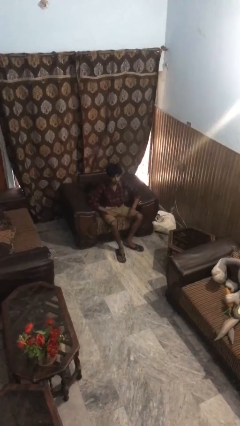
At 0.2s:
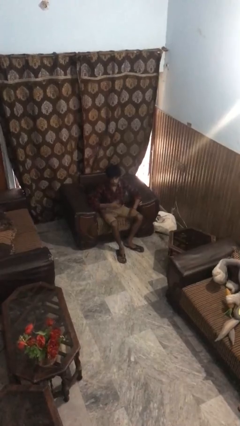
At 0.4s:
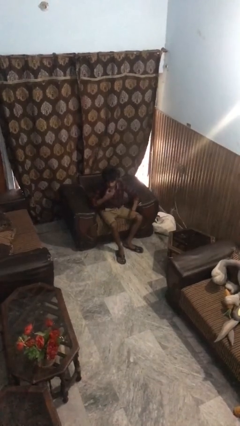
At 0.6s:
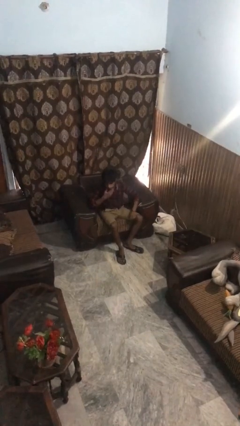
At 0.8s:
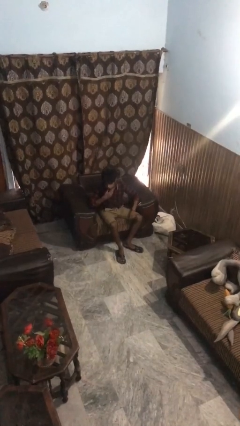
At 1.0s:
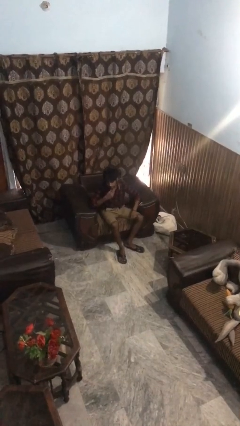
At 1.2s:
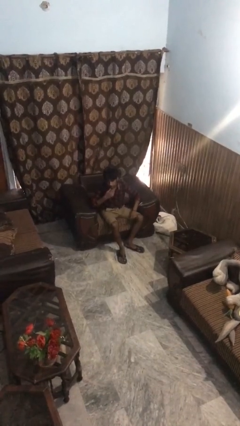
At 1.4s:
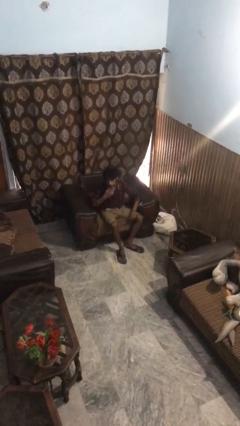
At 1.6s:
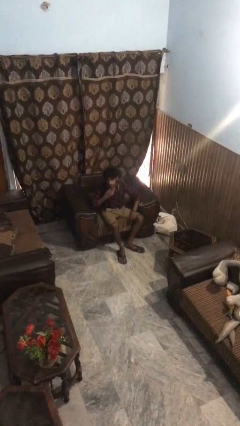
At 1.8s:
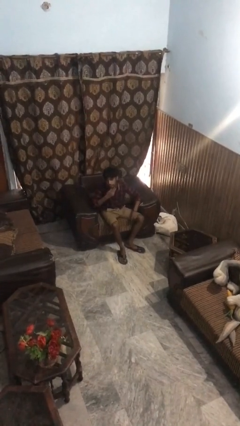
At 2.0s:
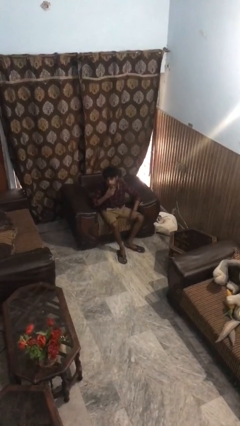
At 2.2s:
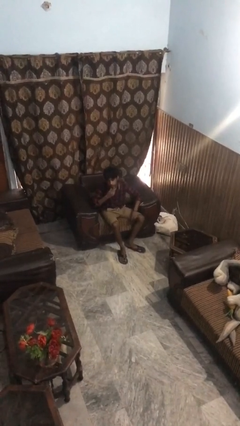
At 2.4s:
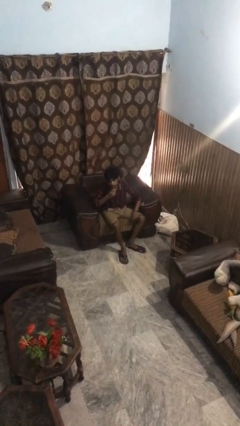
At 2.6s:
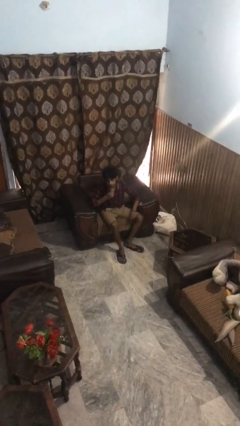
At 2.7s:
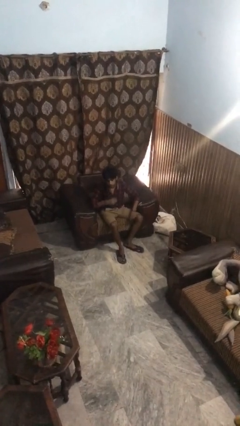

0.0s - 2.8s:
person strokes chin

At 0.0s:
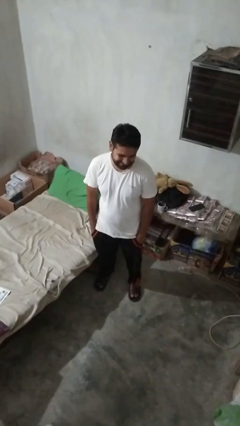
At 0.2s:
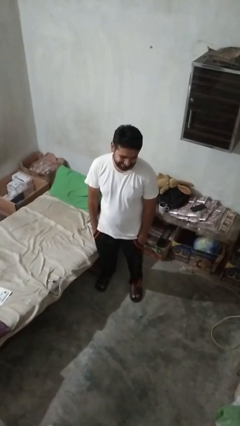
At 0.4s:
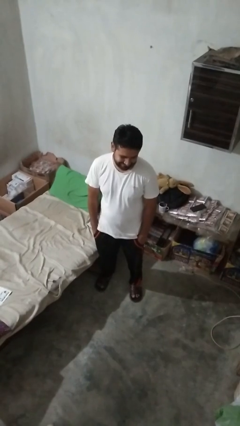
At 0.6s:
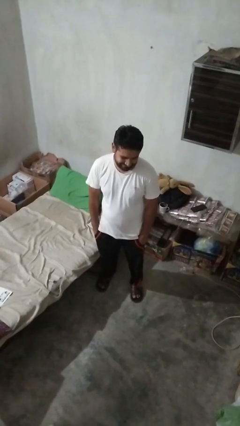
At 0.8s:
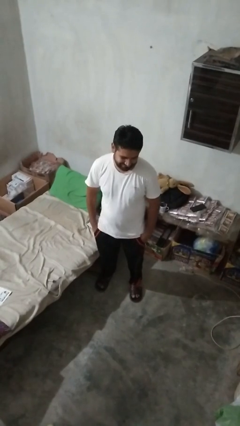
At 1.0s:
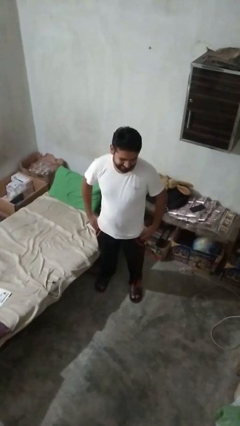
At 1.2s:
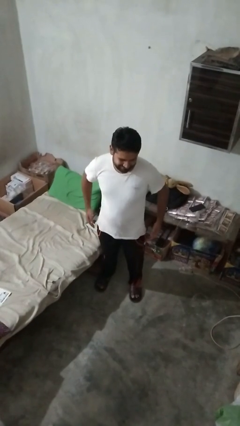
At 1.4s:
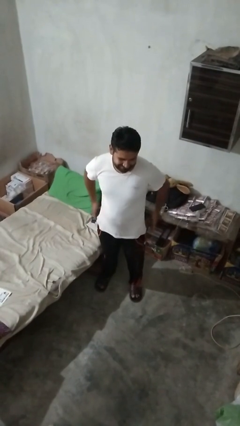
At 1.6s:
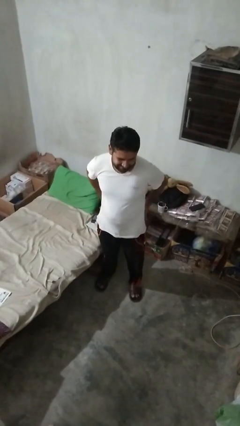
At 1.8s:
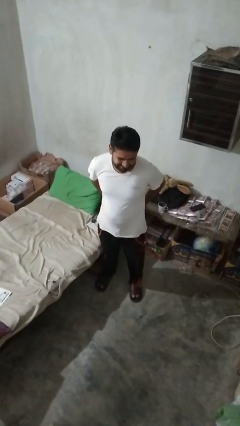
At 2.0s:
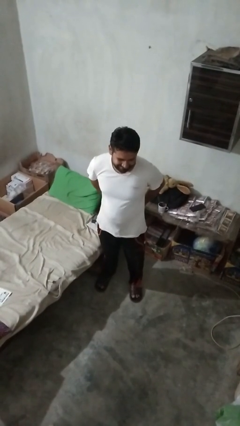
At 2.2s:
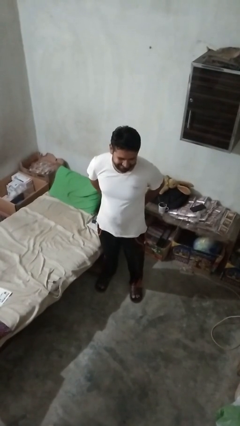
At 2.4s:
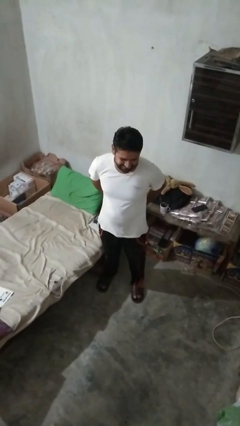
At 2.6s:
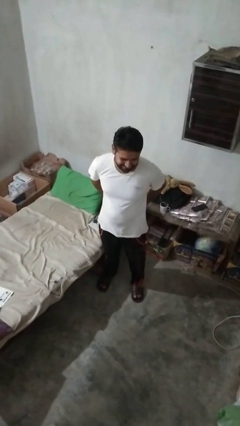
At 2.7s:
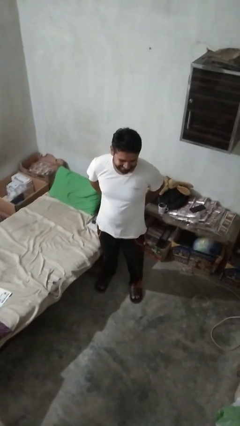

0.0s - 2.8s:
person puts hands in back pockets

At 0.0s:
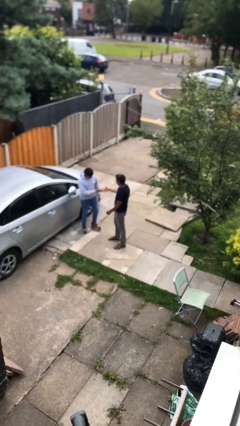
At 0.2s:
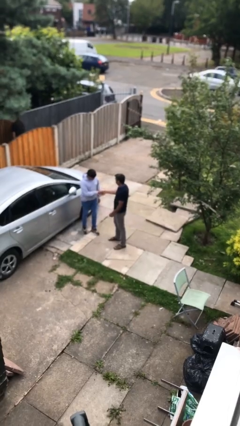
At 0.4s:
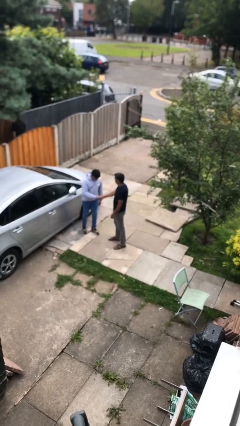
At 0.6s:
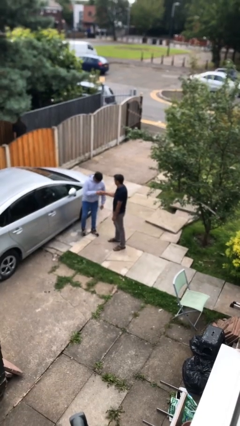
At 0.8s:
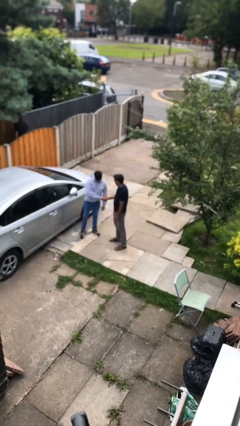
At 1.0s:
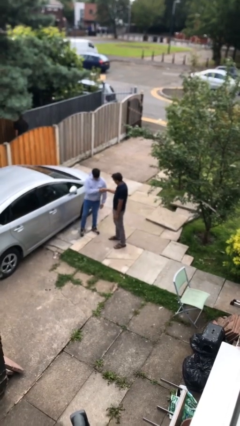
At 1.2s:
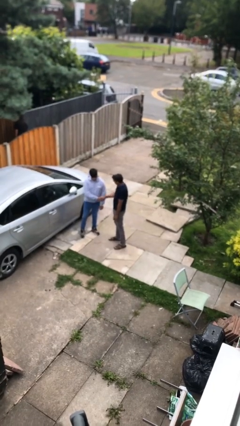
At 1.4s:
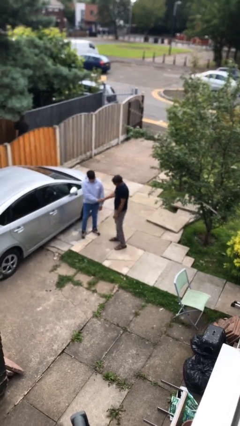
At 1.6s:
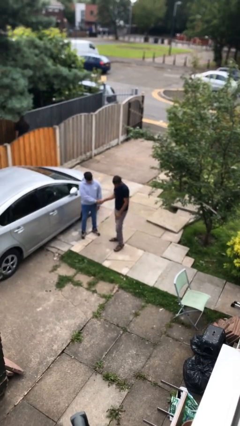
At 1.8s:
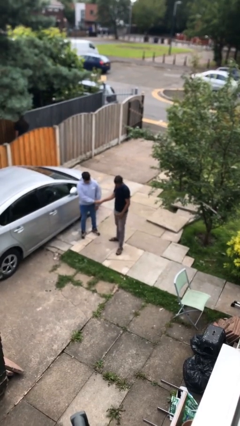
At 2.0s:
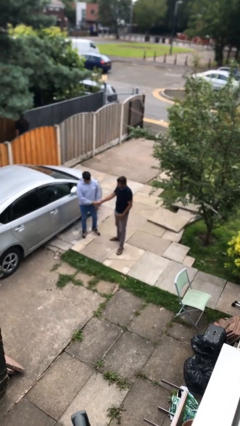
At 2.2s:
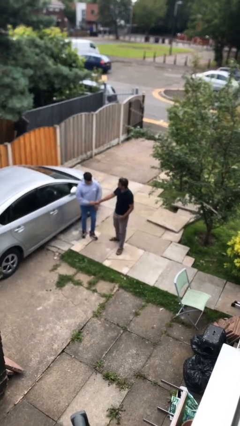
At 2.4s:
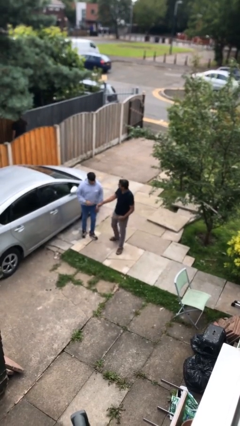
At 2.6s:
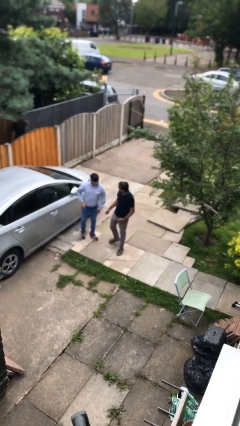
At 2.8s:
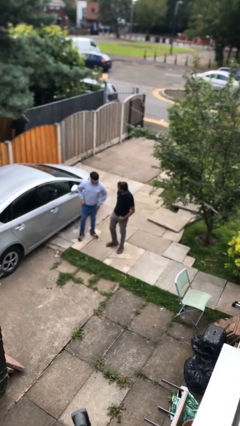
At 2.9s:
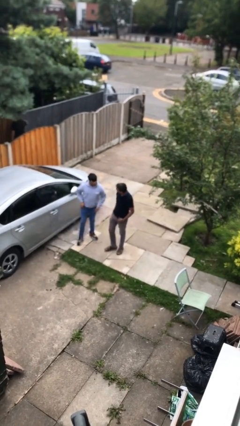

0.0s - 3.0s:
person shakes hand

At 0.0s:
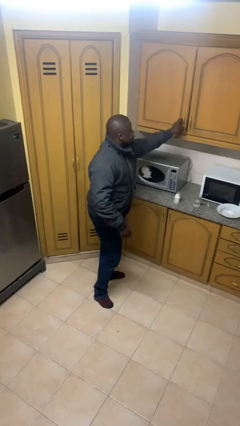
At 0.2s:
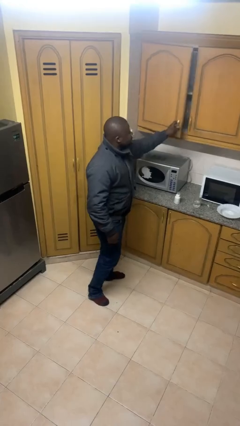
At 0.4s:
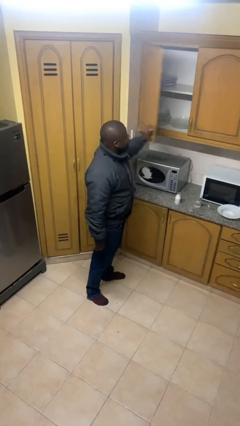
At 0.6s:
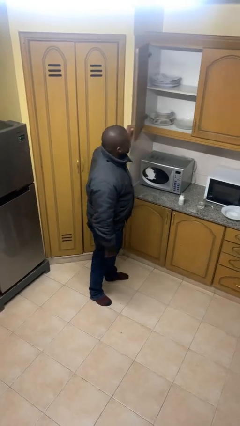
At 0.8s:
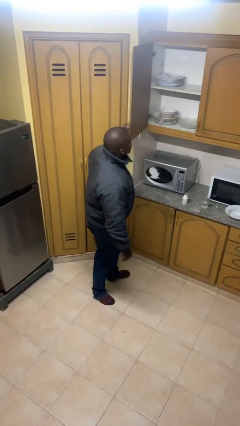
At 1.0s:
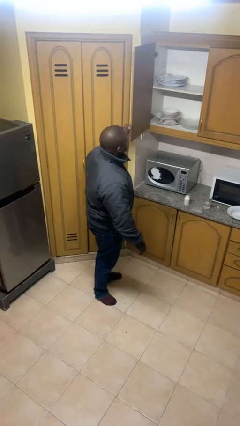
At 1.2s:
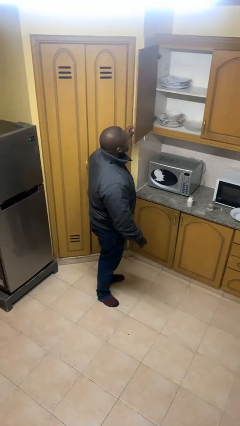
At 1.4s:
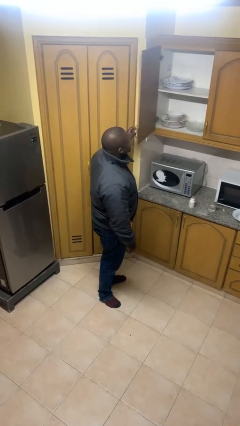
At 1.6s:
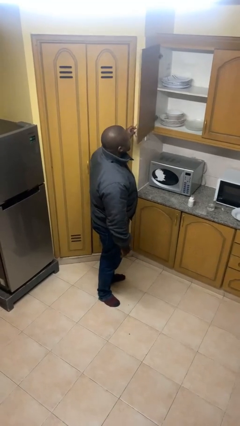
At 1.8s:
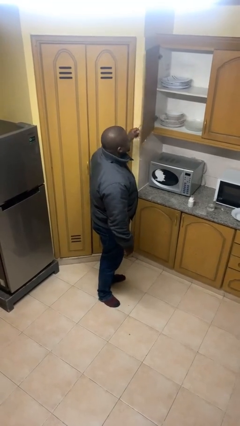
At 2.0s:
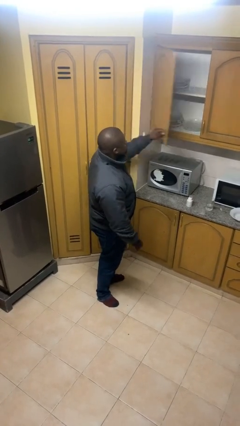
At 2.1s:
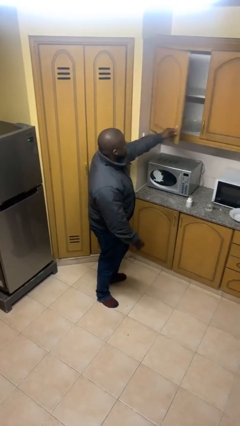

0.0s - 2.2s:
person closes cabinet

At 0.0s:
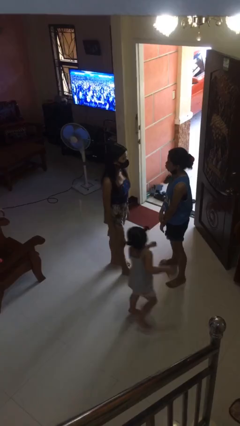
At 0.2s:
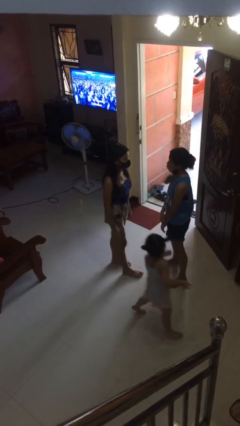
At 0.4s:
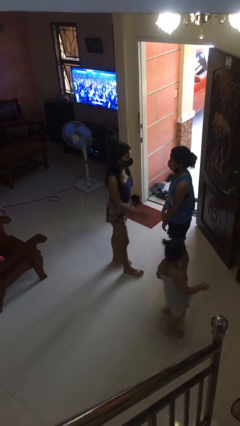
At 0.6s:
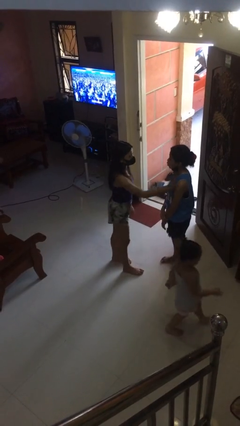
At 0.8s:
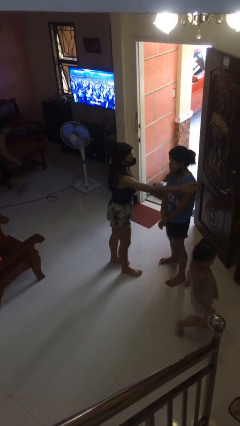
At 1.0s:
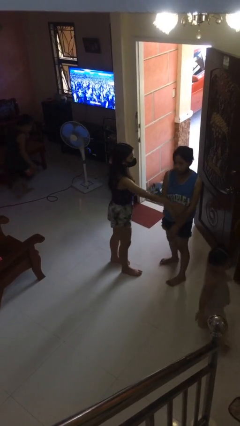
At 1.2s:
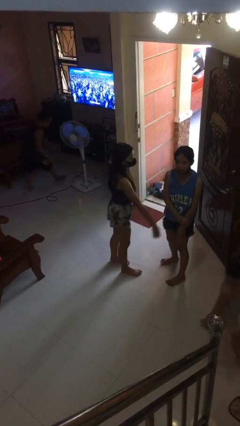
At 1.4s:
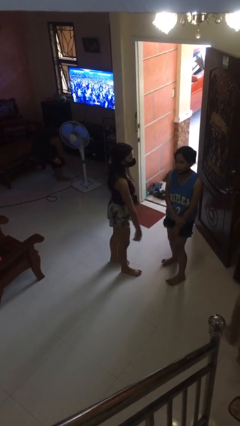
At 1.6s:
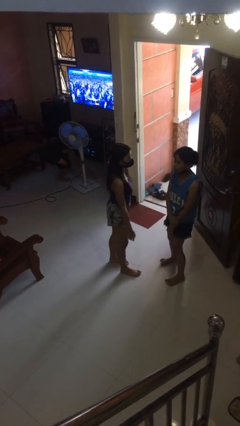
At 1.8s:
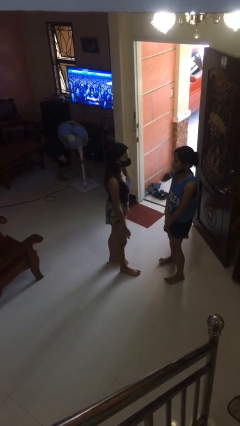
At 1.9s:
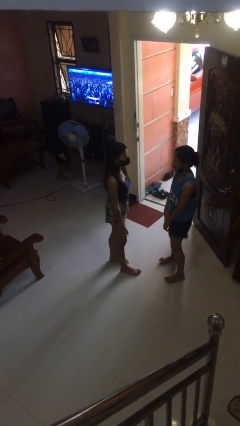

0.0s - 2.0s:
person shoves person

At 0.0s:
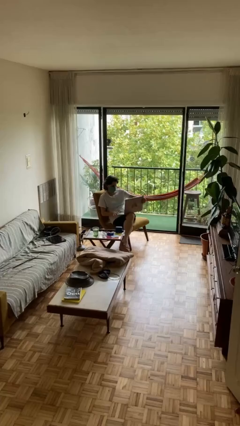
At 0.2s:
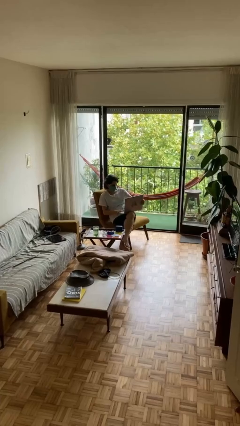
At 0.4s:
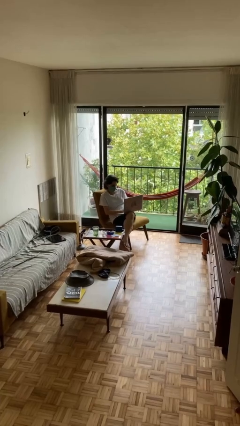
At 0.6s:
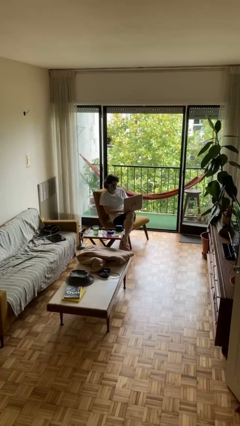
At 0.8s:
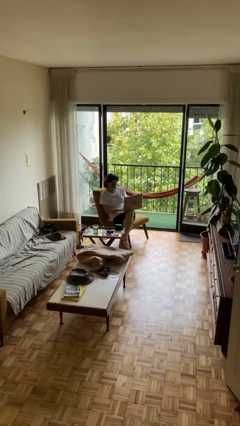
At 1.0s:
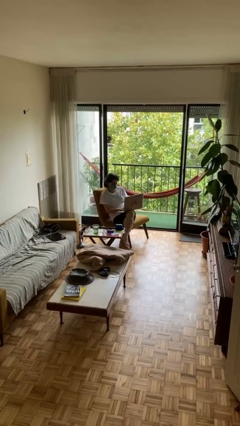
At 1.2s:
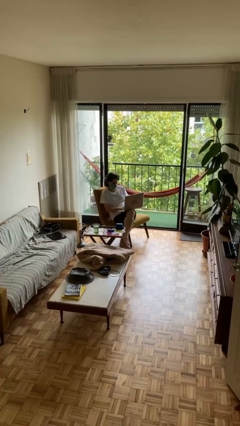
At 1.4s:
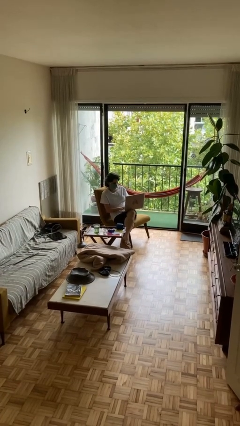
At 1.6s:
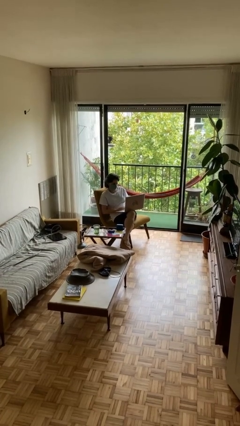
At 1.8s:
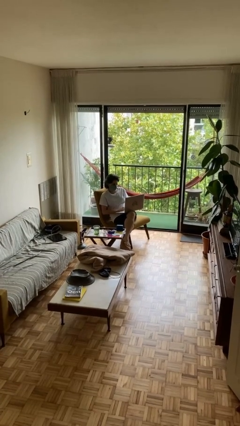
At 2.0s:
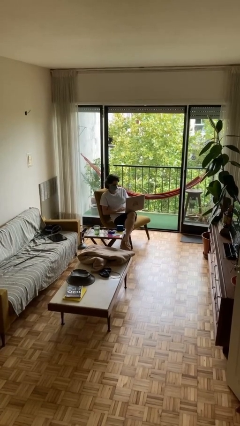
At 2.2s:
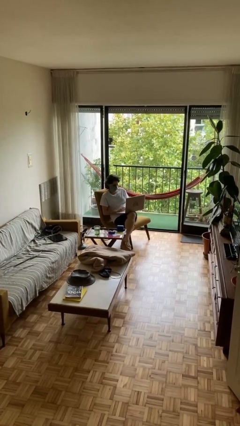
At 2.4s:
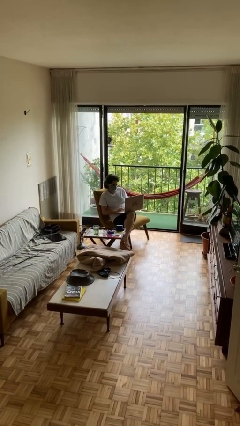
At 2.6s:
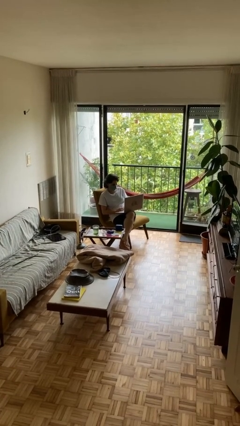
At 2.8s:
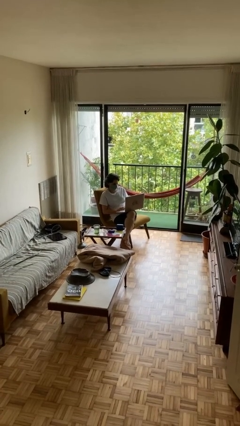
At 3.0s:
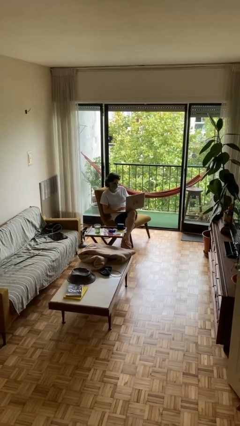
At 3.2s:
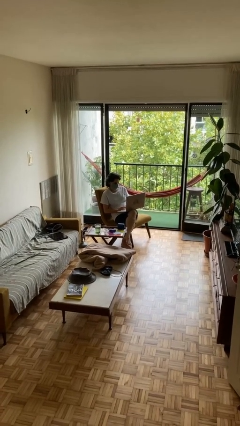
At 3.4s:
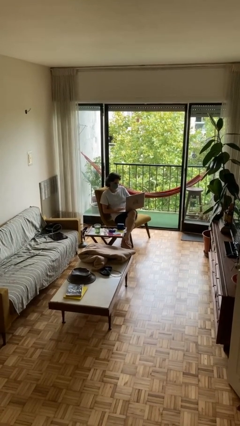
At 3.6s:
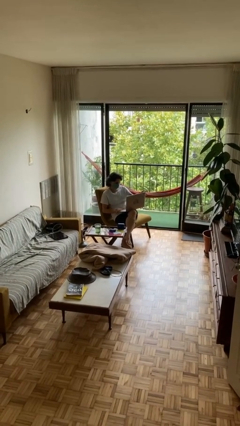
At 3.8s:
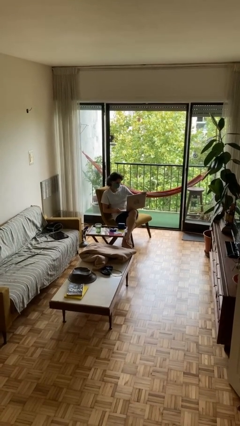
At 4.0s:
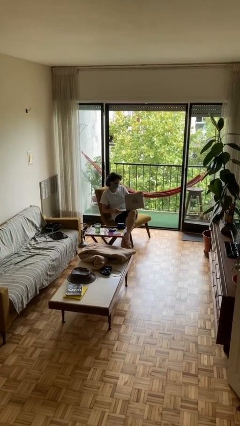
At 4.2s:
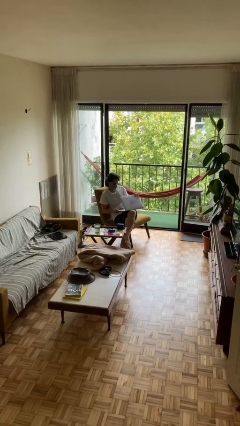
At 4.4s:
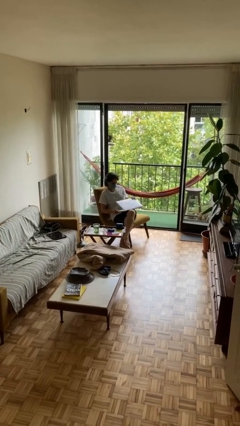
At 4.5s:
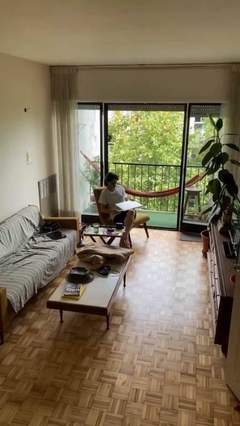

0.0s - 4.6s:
person interacts with laptop

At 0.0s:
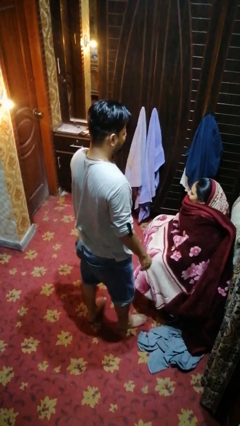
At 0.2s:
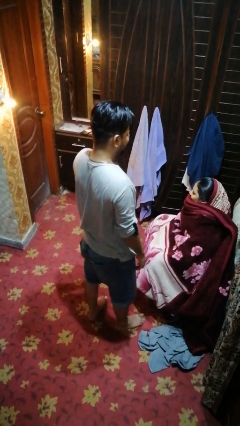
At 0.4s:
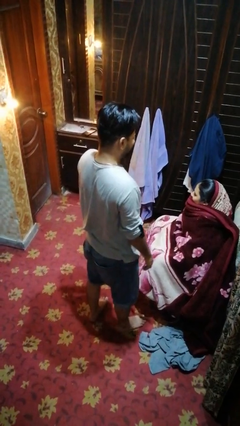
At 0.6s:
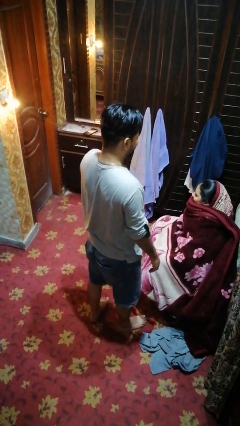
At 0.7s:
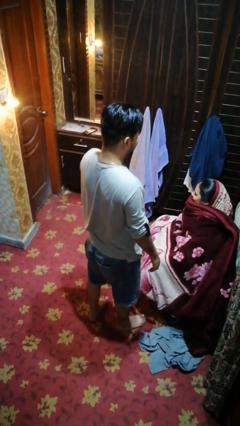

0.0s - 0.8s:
person uncovers friend with blanket
